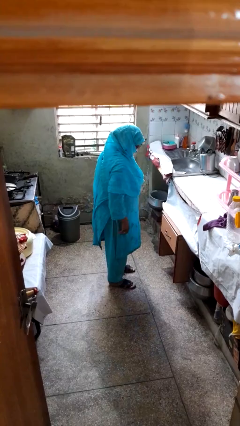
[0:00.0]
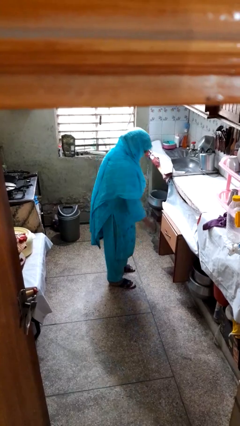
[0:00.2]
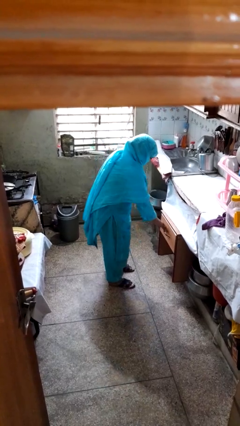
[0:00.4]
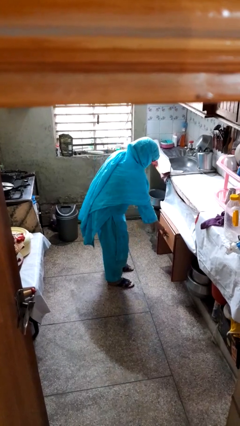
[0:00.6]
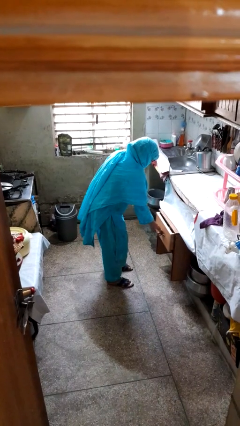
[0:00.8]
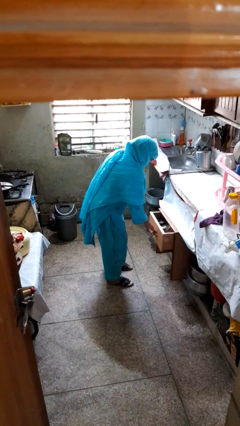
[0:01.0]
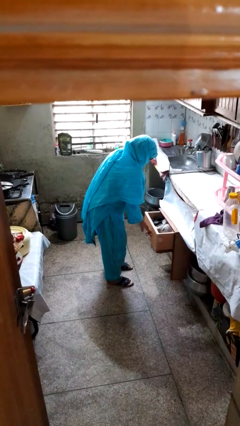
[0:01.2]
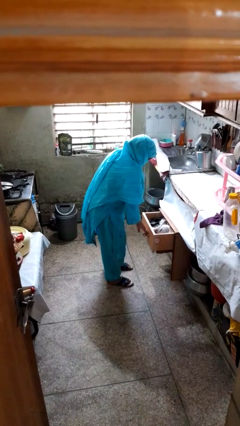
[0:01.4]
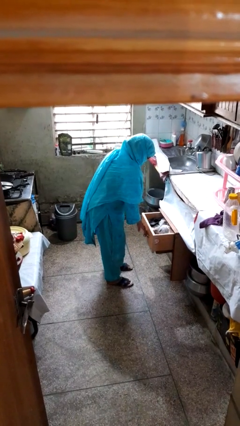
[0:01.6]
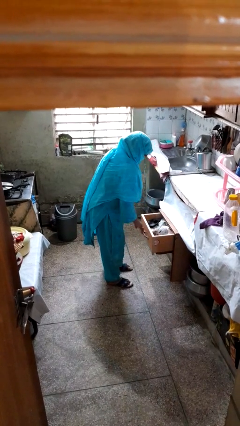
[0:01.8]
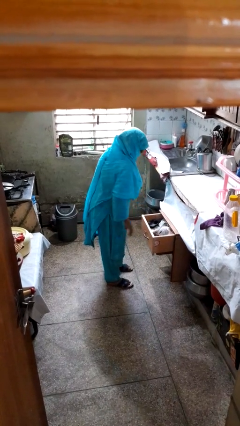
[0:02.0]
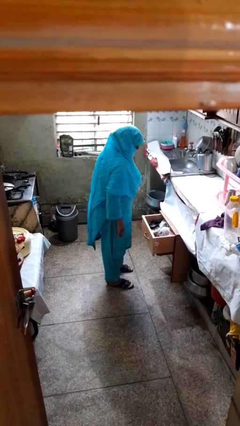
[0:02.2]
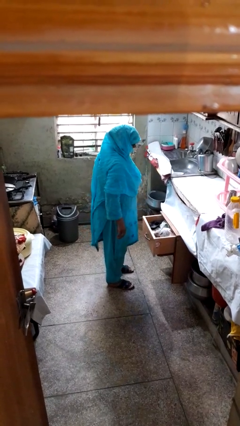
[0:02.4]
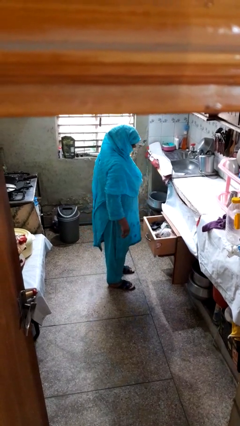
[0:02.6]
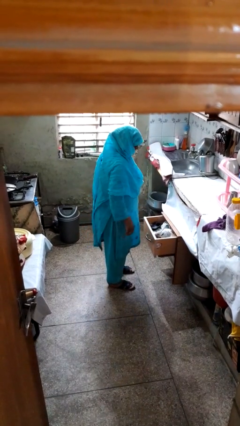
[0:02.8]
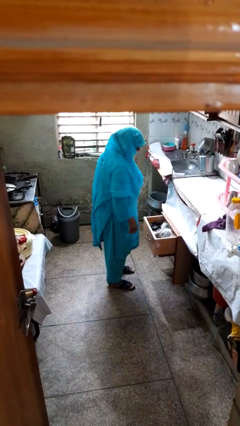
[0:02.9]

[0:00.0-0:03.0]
person opens kitchen drawer

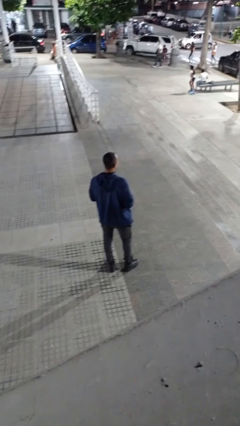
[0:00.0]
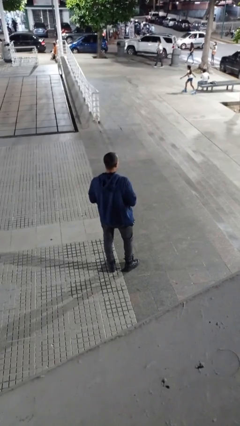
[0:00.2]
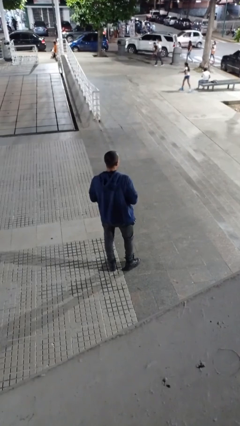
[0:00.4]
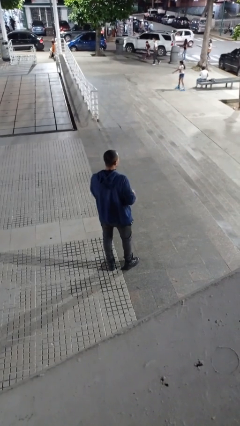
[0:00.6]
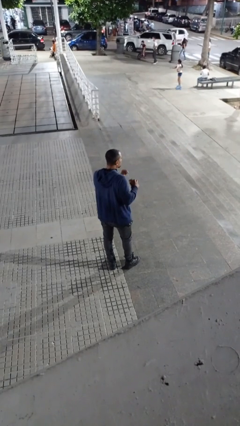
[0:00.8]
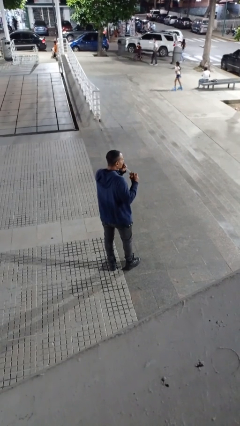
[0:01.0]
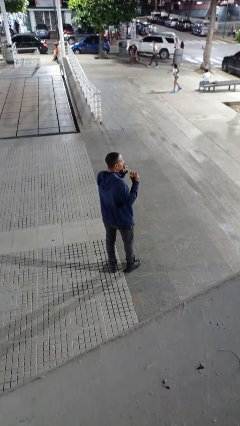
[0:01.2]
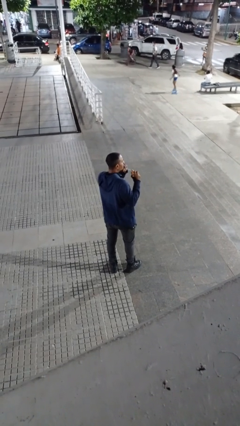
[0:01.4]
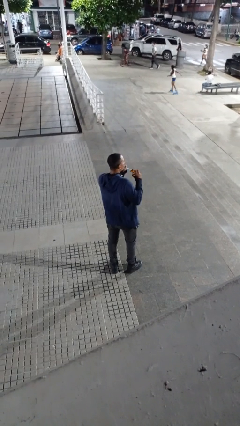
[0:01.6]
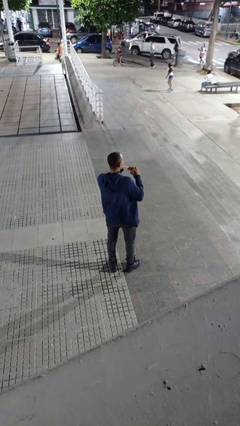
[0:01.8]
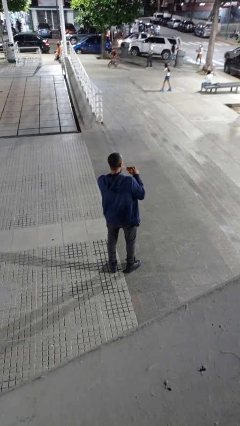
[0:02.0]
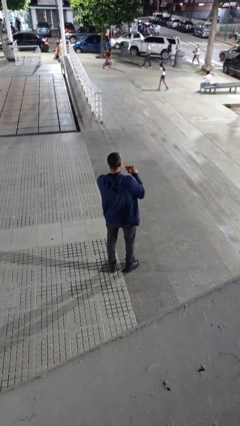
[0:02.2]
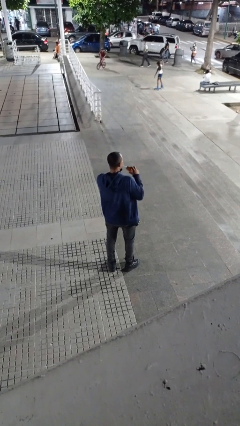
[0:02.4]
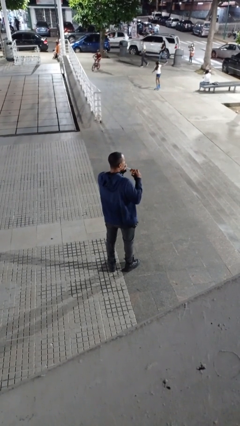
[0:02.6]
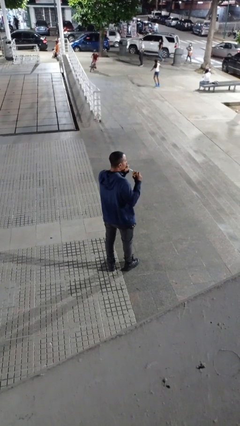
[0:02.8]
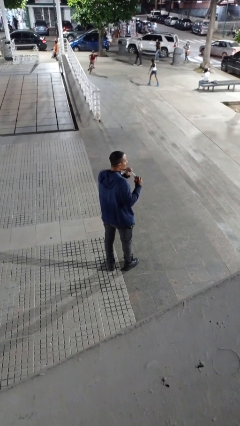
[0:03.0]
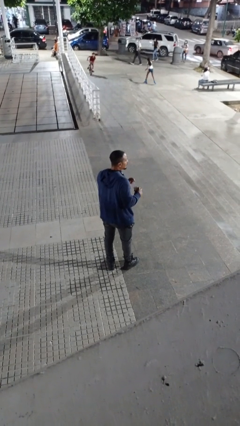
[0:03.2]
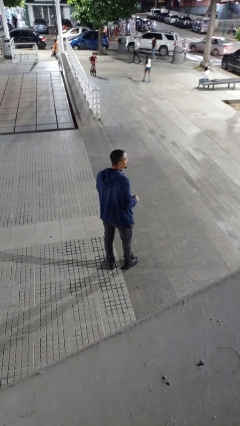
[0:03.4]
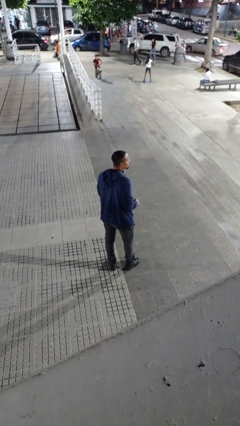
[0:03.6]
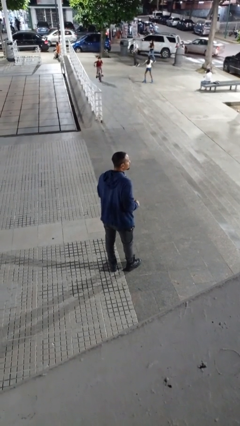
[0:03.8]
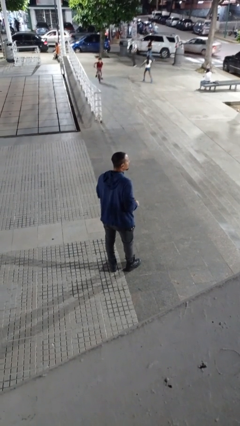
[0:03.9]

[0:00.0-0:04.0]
person drinks from straw

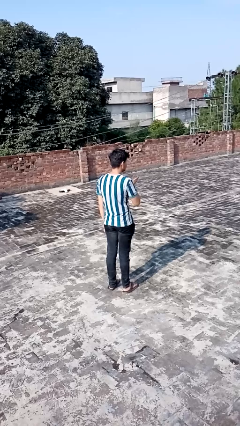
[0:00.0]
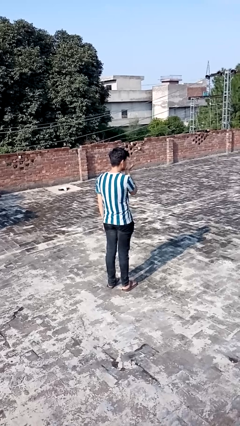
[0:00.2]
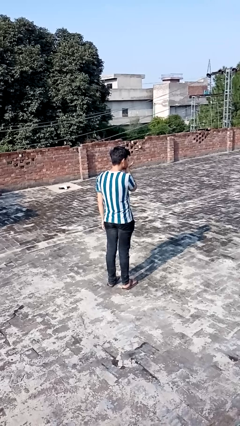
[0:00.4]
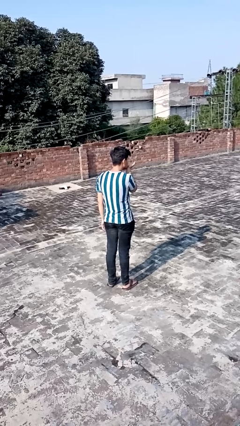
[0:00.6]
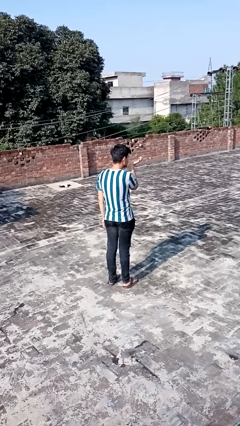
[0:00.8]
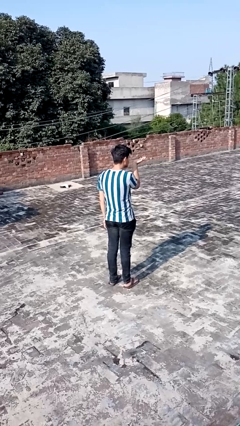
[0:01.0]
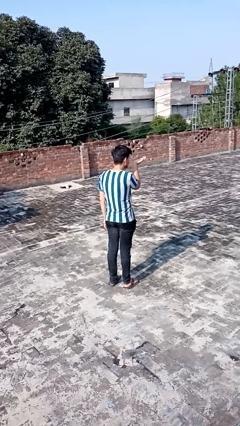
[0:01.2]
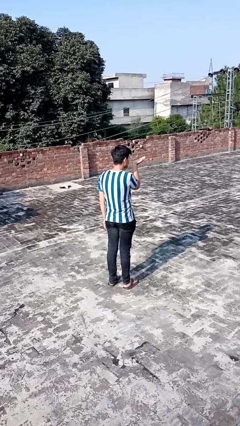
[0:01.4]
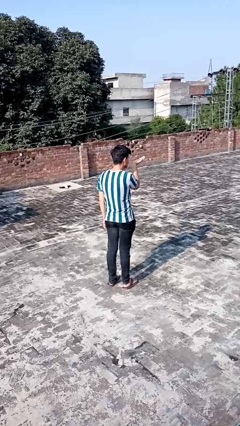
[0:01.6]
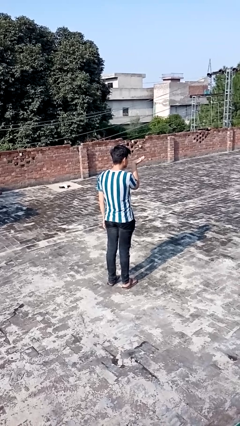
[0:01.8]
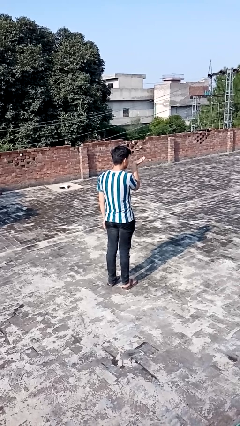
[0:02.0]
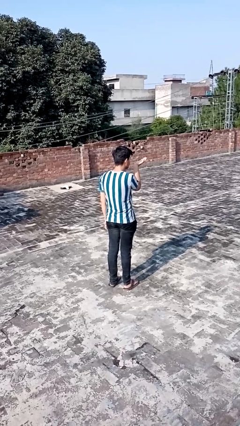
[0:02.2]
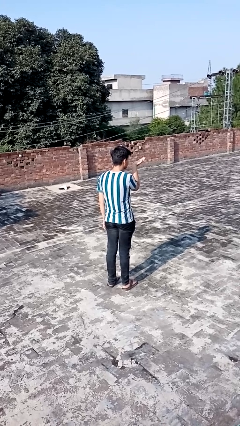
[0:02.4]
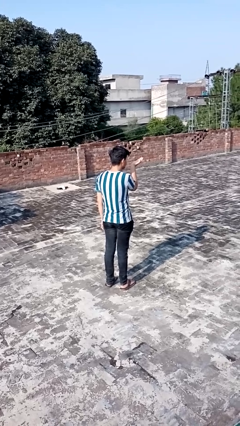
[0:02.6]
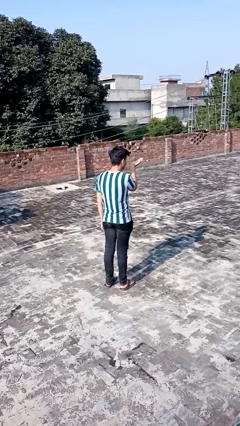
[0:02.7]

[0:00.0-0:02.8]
person gestures blow kiss

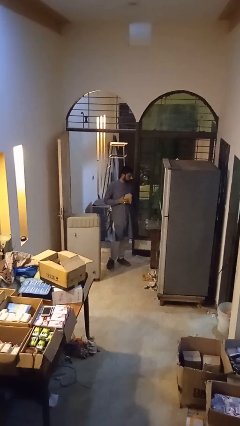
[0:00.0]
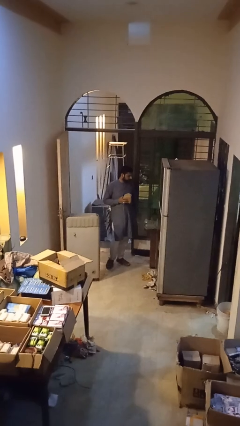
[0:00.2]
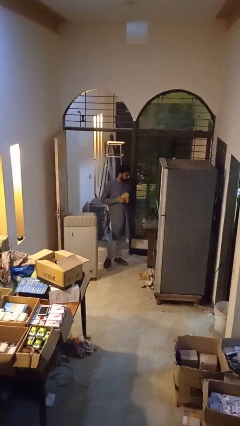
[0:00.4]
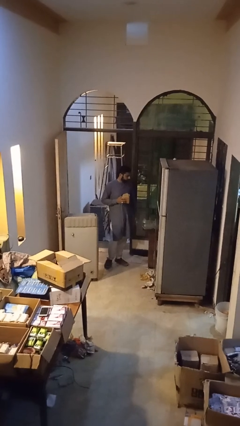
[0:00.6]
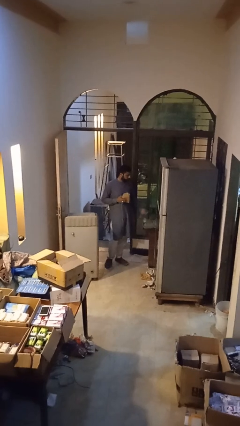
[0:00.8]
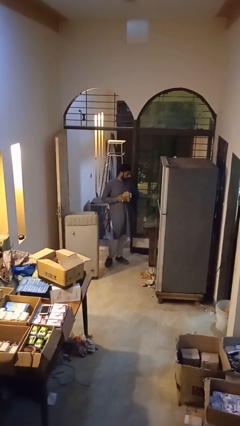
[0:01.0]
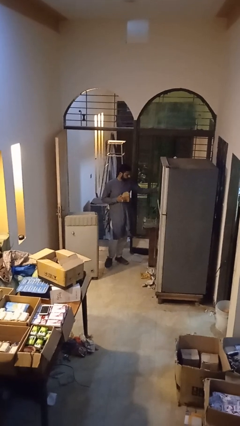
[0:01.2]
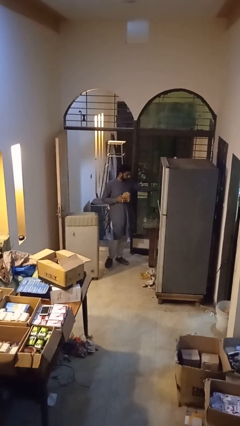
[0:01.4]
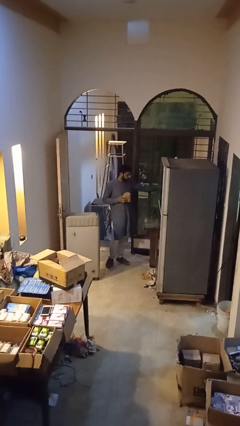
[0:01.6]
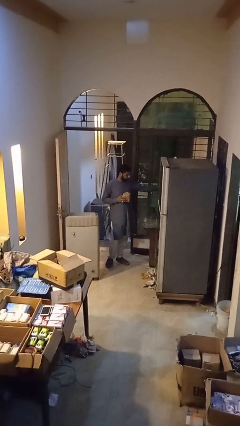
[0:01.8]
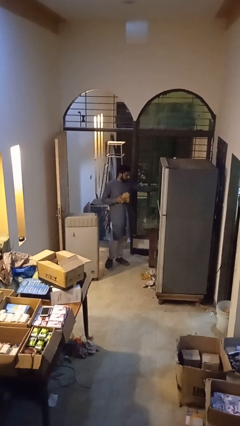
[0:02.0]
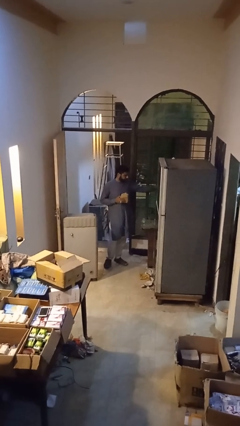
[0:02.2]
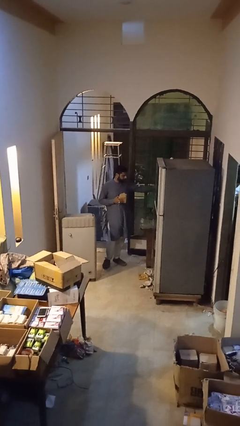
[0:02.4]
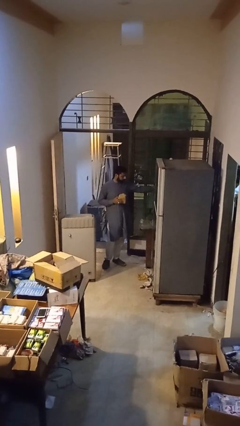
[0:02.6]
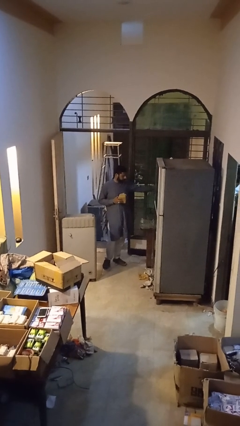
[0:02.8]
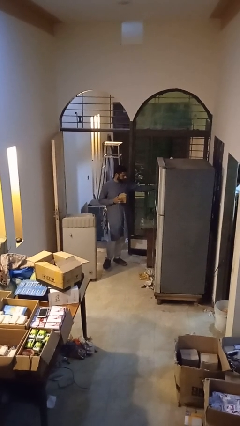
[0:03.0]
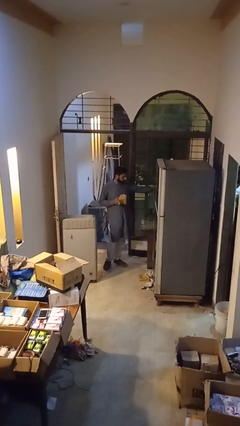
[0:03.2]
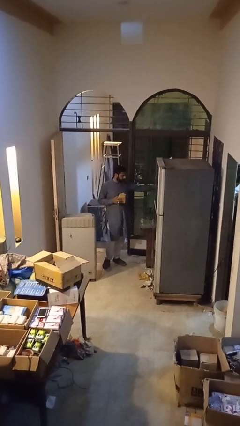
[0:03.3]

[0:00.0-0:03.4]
person plugs into electrical socket

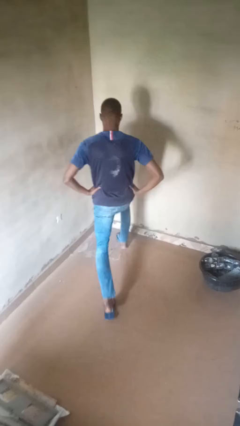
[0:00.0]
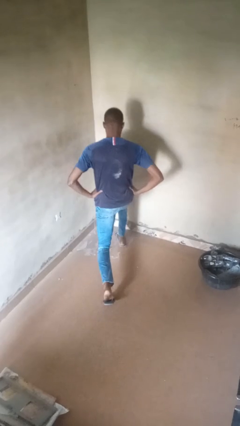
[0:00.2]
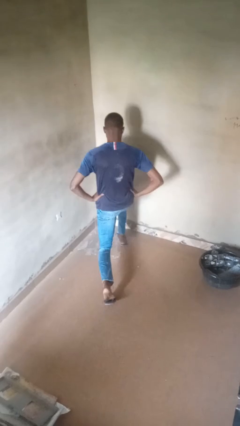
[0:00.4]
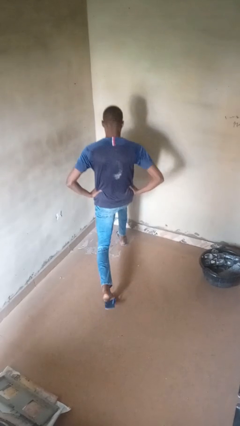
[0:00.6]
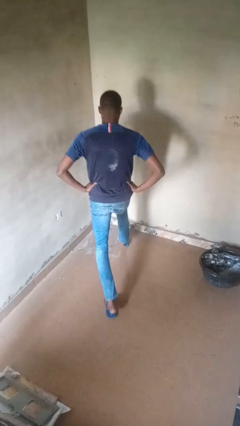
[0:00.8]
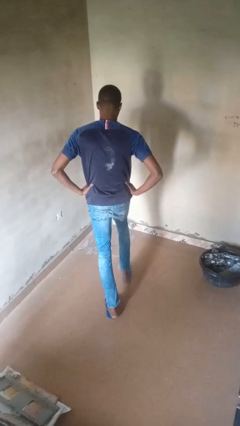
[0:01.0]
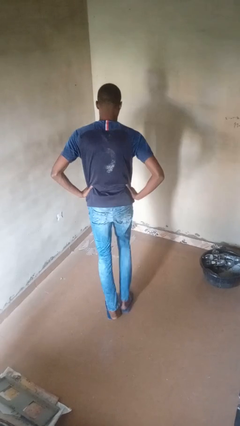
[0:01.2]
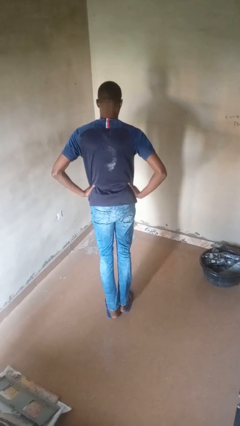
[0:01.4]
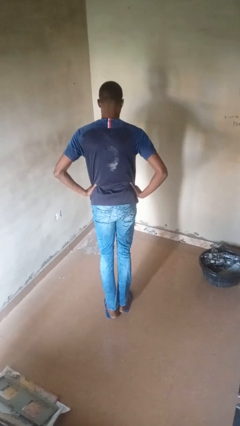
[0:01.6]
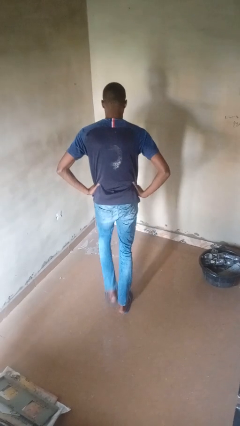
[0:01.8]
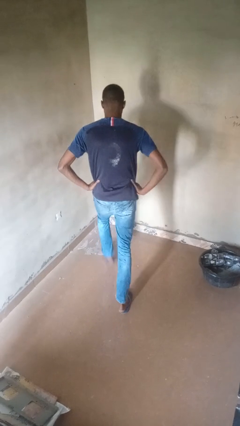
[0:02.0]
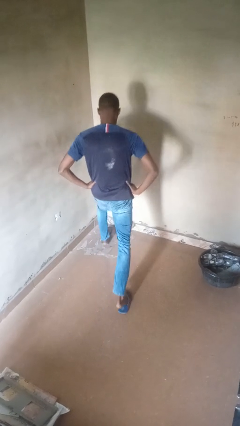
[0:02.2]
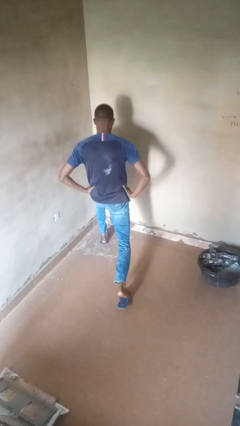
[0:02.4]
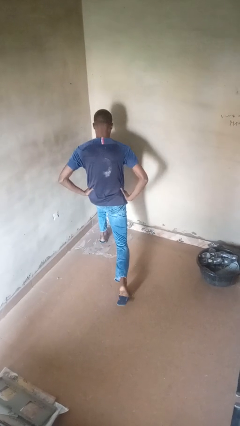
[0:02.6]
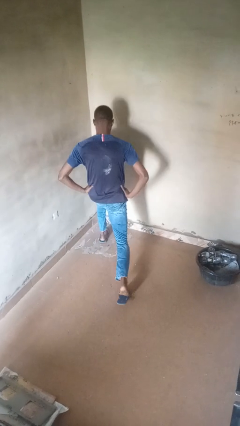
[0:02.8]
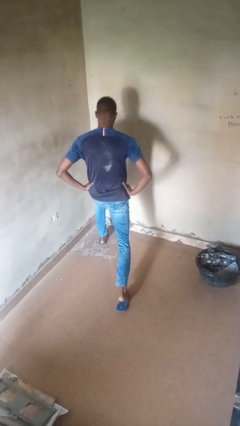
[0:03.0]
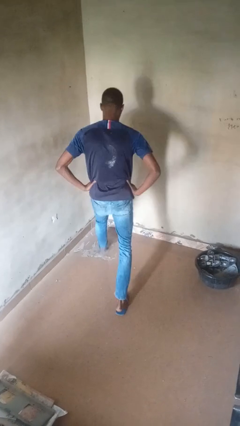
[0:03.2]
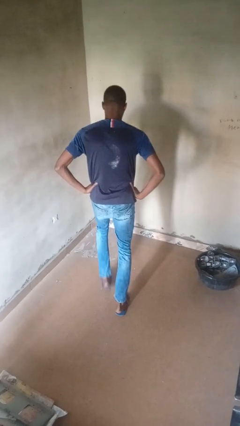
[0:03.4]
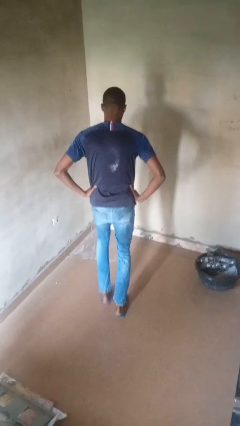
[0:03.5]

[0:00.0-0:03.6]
person exercises with lunges

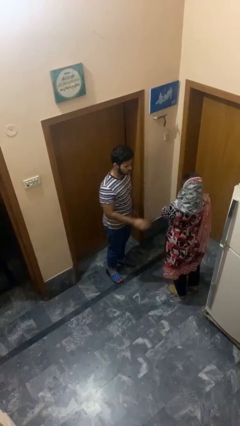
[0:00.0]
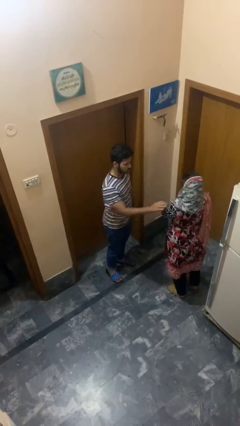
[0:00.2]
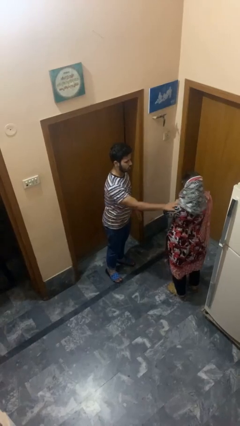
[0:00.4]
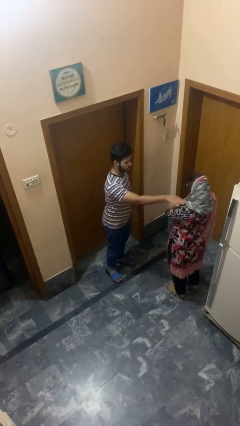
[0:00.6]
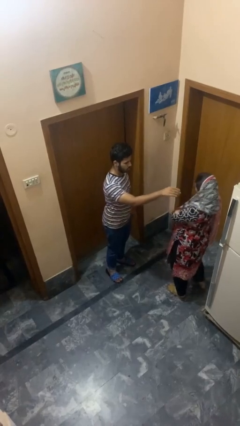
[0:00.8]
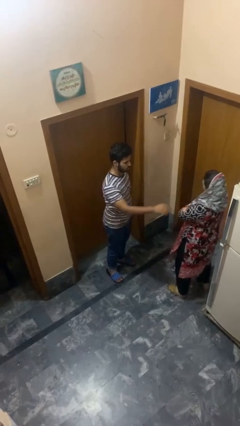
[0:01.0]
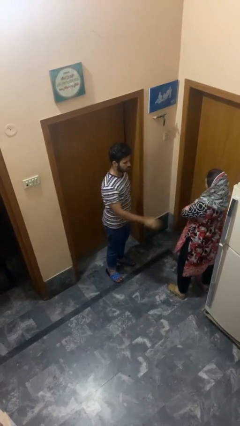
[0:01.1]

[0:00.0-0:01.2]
person shoves person
